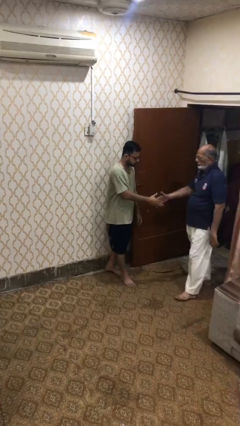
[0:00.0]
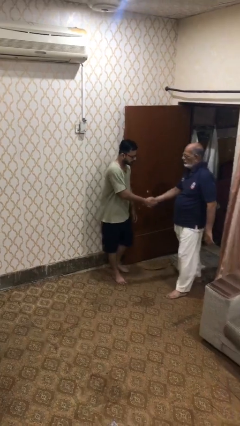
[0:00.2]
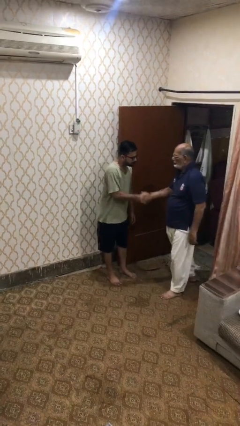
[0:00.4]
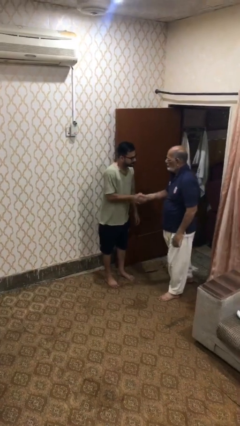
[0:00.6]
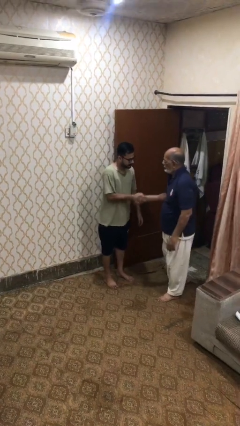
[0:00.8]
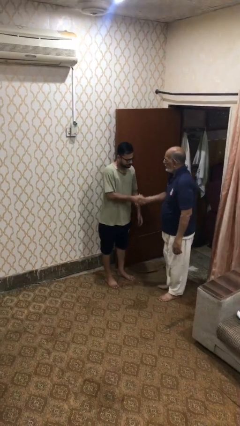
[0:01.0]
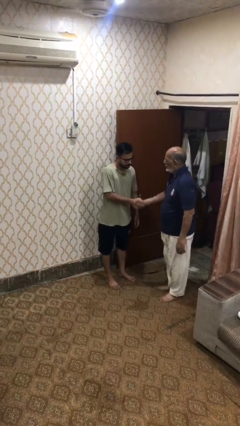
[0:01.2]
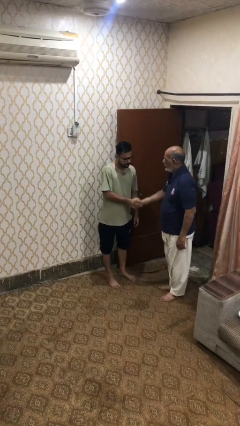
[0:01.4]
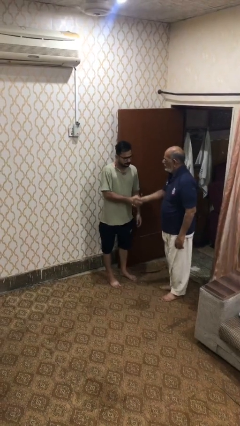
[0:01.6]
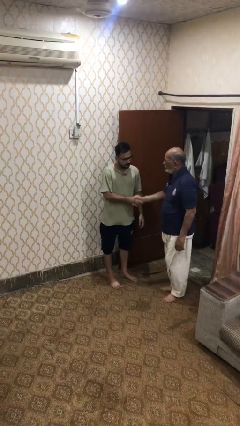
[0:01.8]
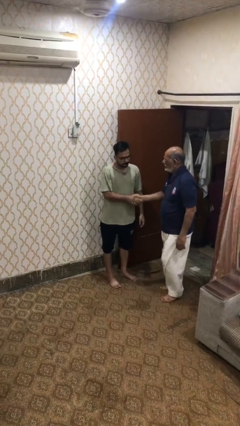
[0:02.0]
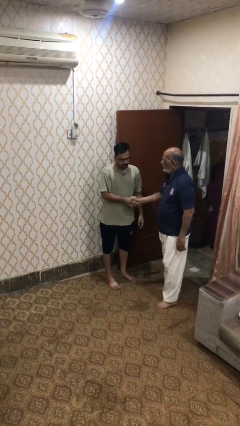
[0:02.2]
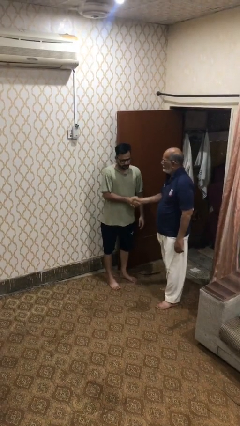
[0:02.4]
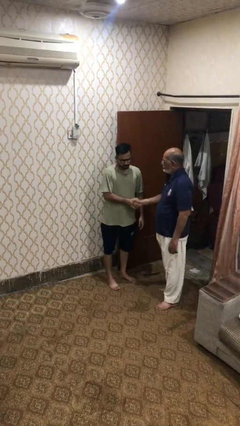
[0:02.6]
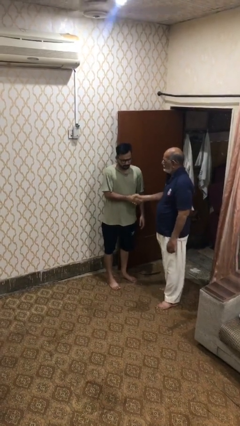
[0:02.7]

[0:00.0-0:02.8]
person shakes hand

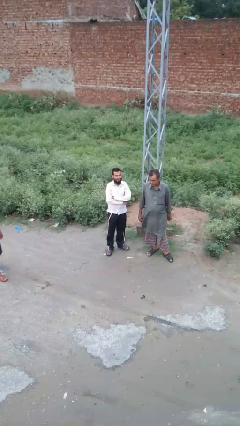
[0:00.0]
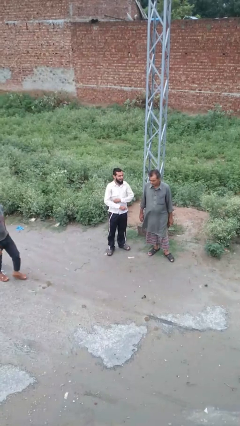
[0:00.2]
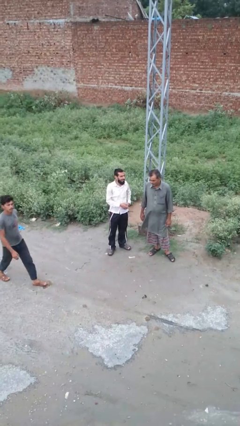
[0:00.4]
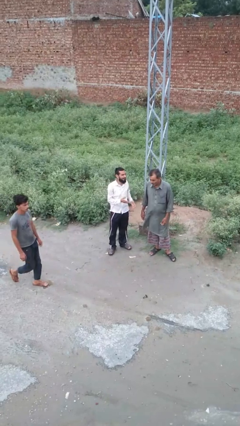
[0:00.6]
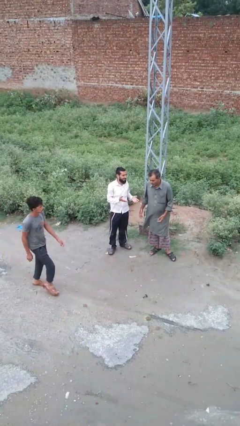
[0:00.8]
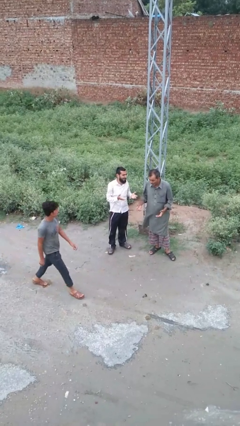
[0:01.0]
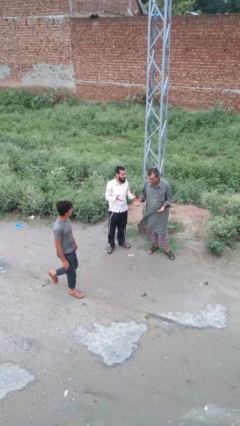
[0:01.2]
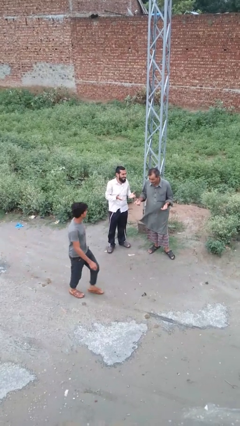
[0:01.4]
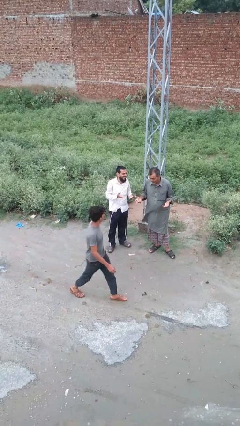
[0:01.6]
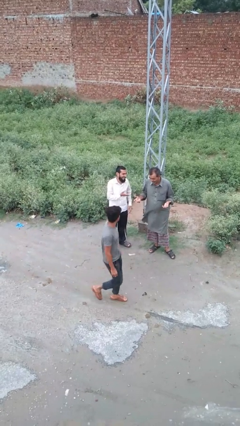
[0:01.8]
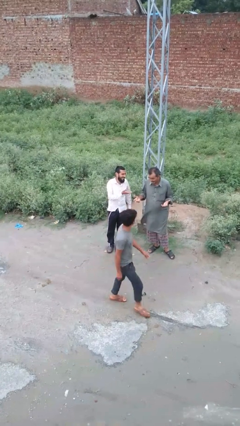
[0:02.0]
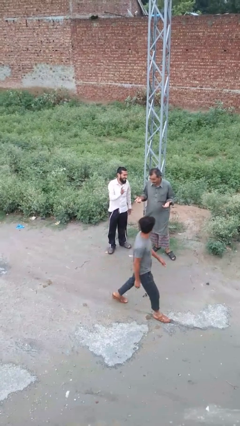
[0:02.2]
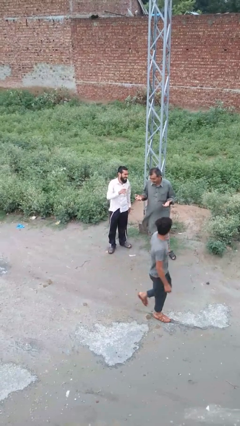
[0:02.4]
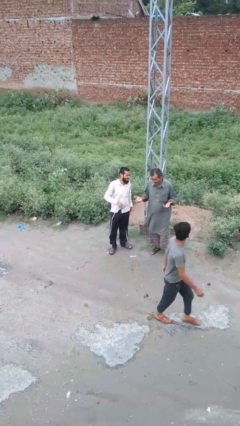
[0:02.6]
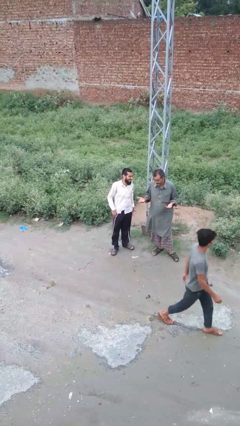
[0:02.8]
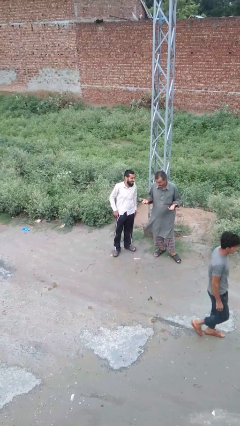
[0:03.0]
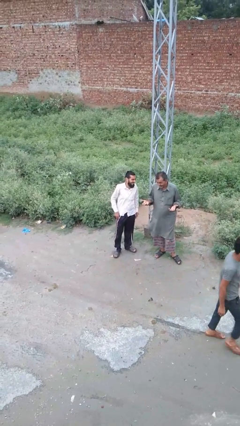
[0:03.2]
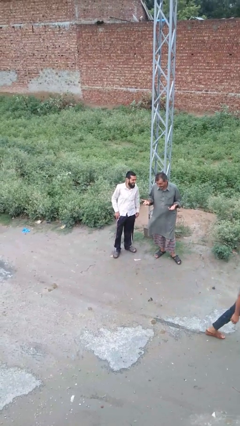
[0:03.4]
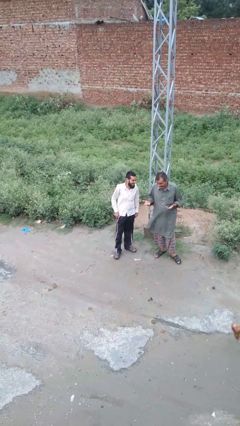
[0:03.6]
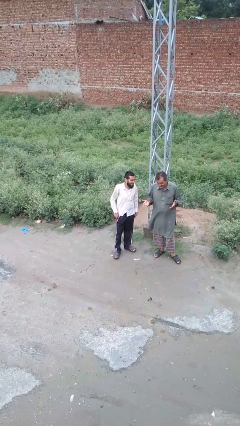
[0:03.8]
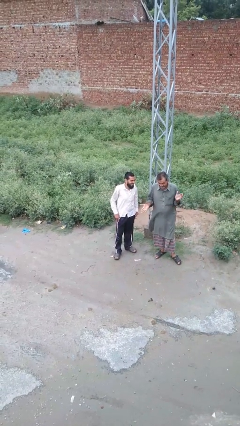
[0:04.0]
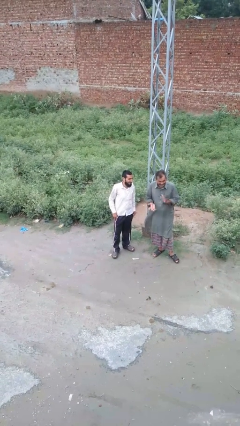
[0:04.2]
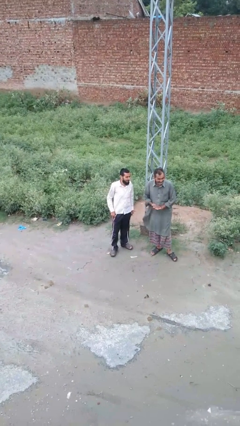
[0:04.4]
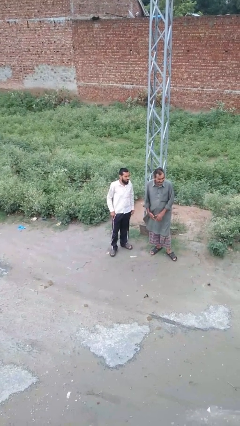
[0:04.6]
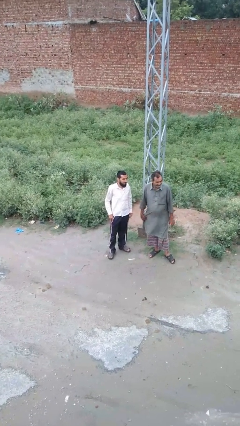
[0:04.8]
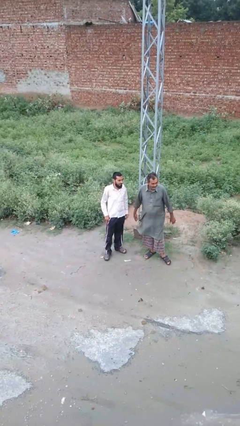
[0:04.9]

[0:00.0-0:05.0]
person laughs with person

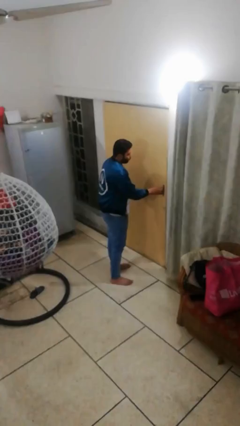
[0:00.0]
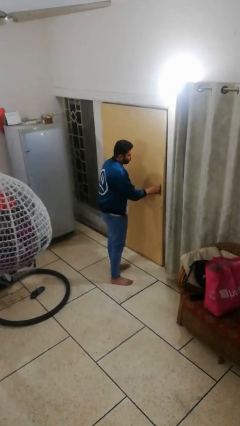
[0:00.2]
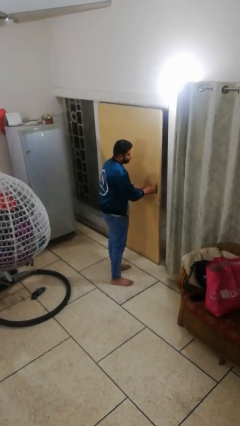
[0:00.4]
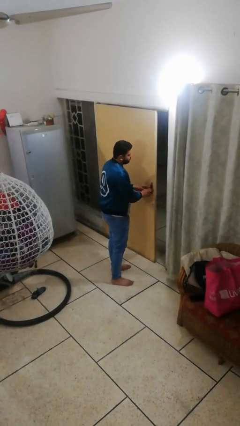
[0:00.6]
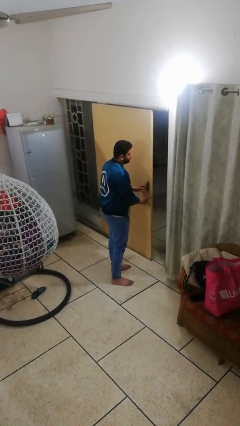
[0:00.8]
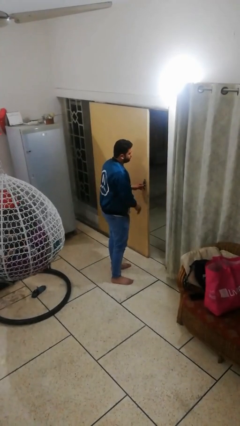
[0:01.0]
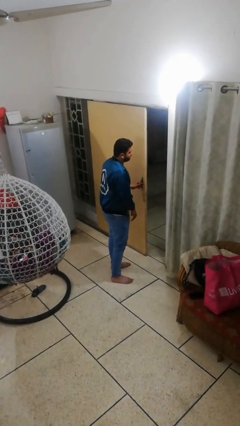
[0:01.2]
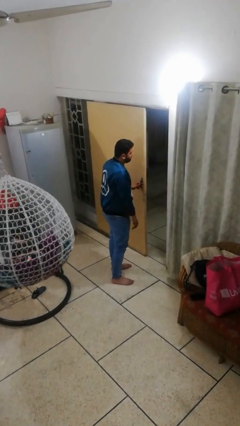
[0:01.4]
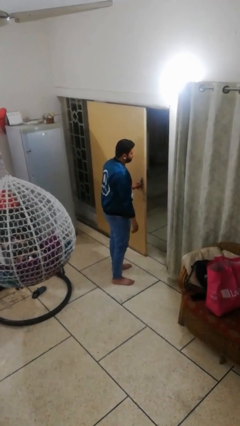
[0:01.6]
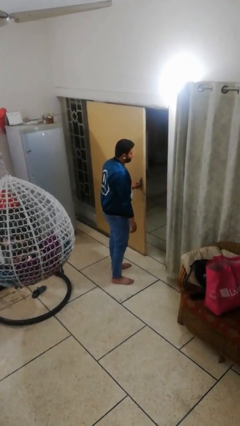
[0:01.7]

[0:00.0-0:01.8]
person opens facility door

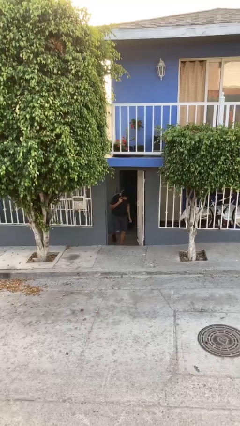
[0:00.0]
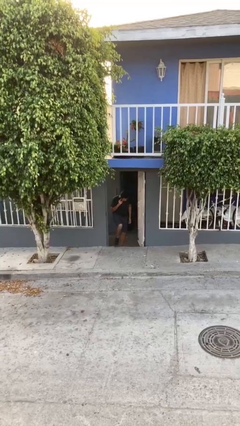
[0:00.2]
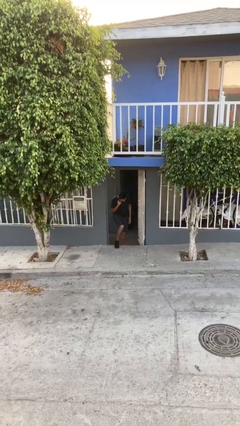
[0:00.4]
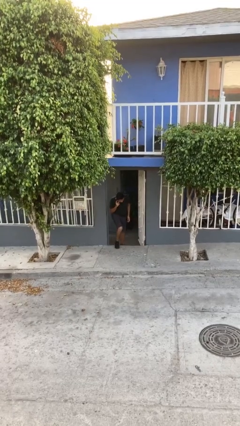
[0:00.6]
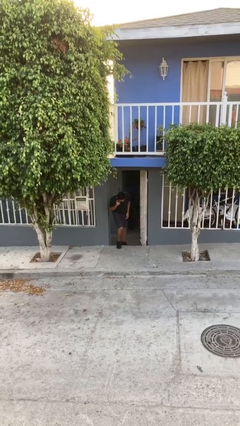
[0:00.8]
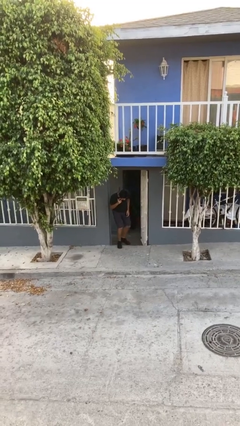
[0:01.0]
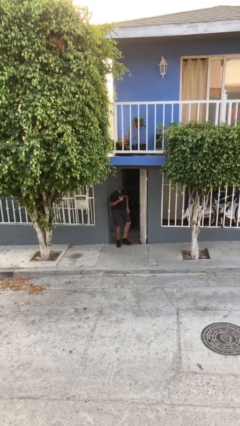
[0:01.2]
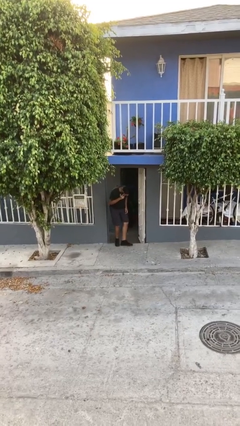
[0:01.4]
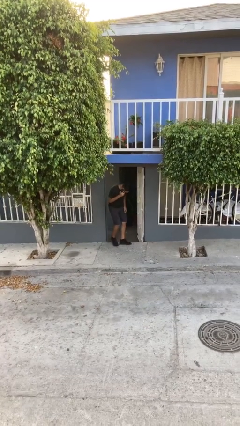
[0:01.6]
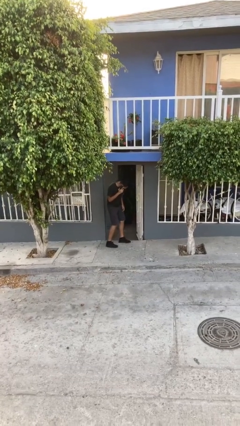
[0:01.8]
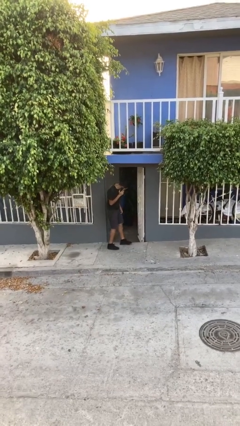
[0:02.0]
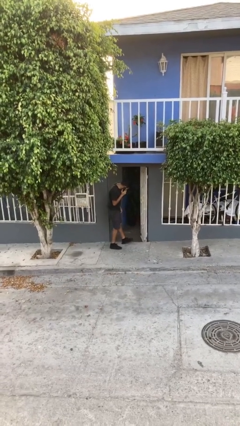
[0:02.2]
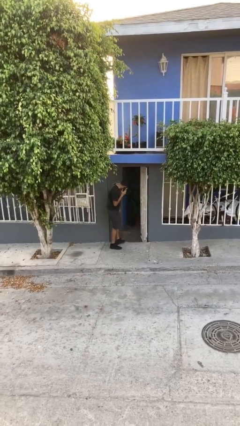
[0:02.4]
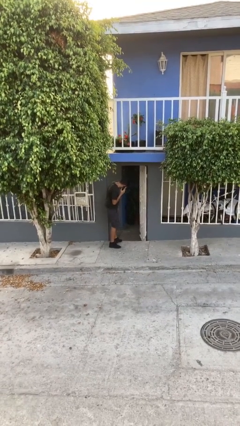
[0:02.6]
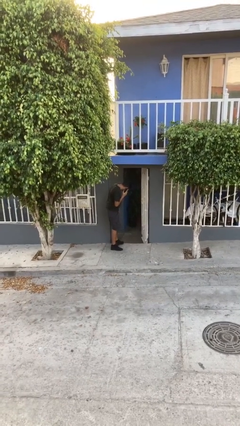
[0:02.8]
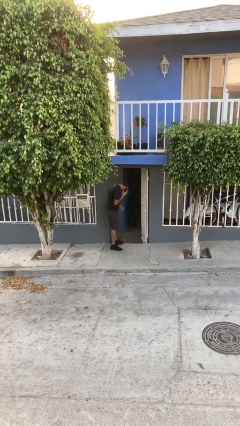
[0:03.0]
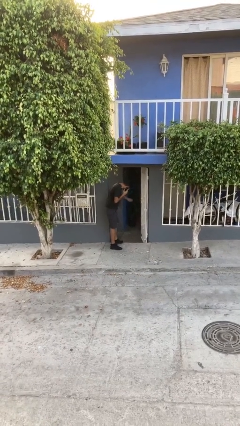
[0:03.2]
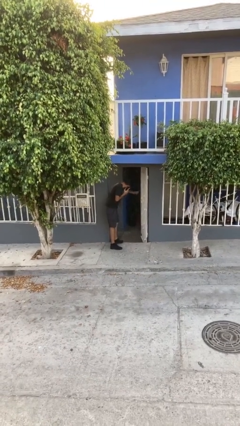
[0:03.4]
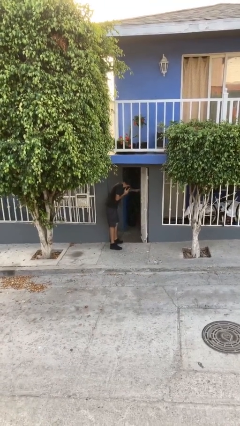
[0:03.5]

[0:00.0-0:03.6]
person enters scene through structure

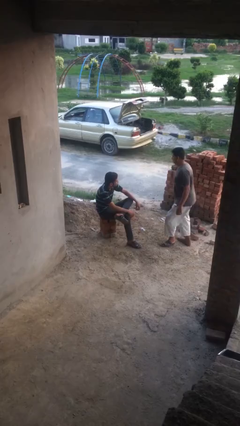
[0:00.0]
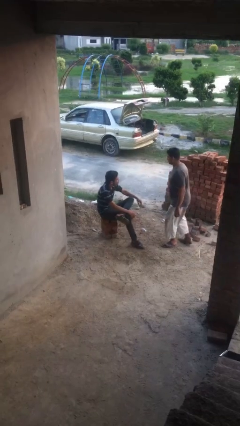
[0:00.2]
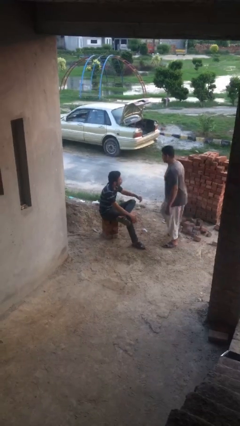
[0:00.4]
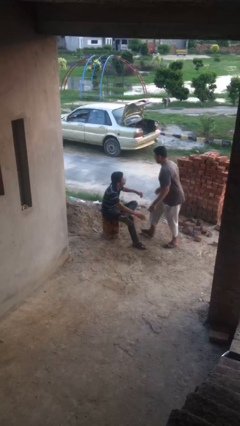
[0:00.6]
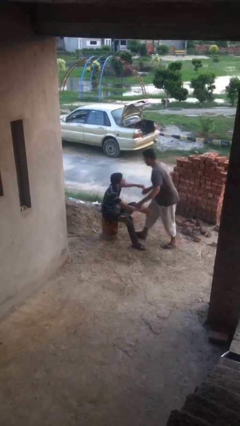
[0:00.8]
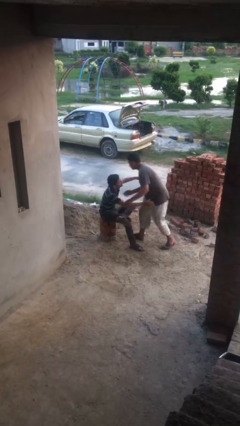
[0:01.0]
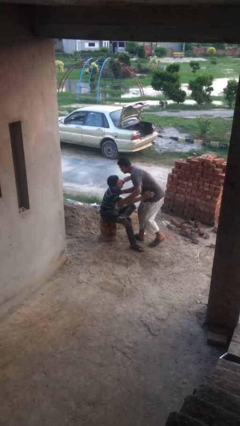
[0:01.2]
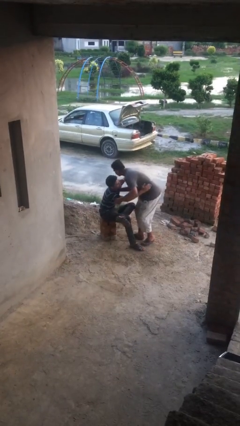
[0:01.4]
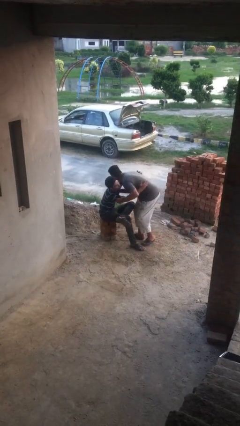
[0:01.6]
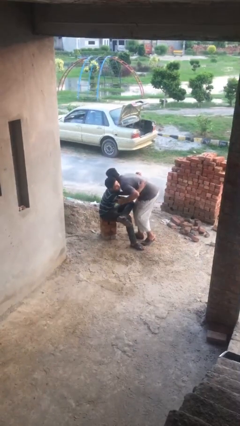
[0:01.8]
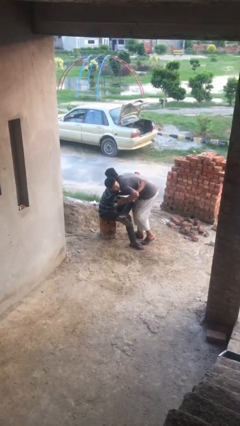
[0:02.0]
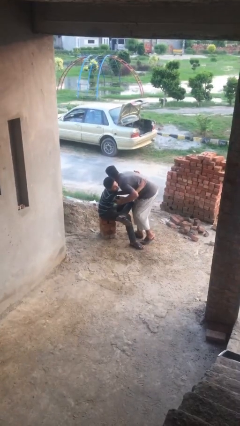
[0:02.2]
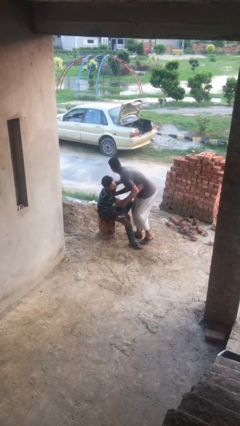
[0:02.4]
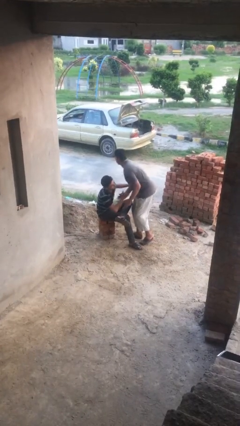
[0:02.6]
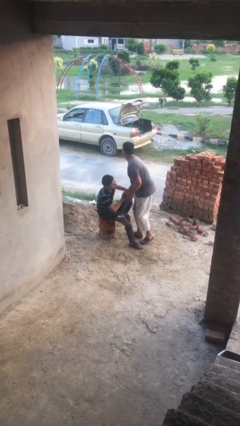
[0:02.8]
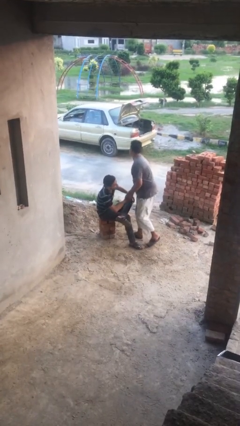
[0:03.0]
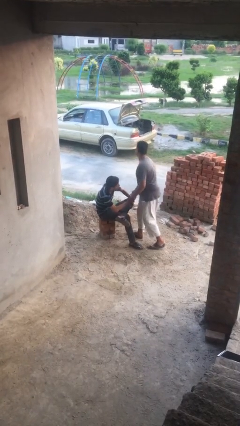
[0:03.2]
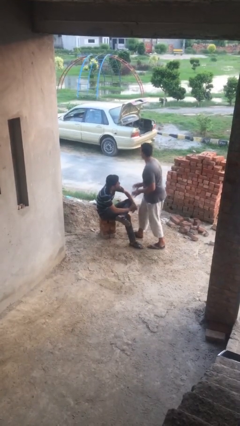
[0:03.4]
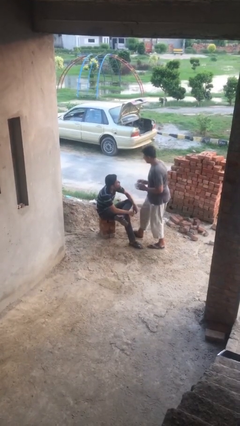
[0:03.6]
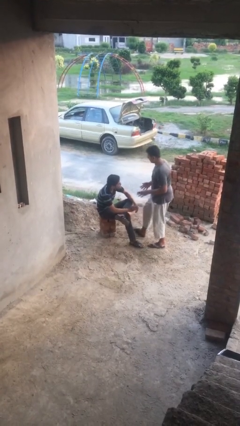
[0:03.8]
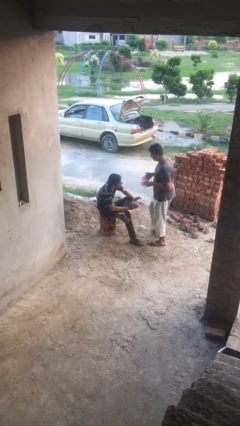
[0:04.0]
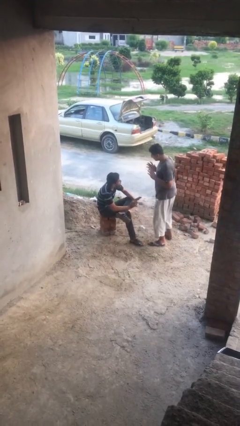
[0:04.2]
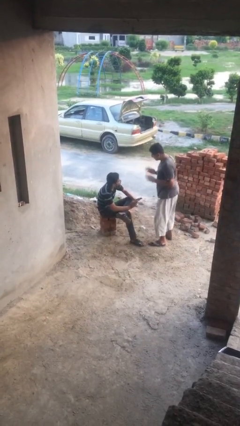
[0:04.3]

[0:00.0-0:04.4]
person embraces person

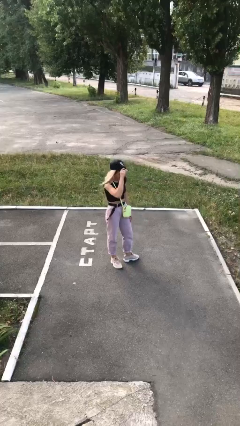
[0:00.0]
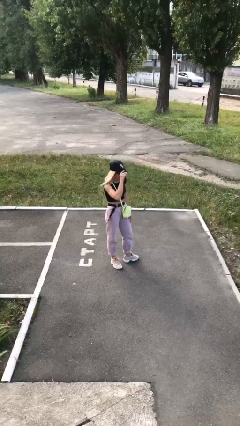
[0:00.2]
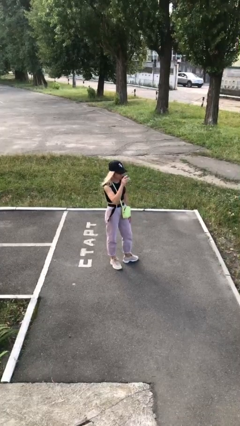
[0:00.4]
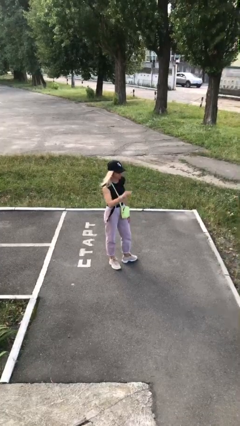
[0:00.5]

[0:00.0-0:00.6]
person puts on hat
